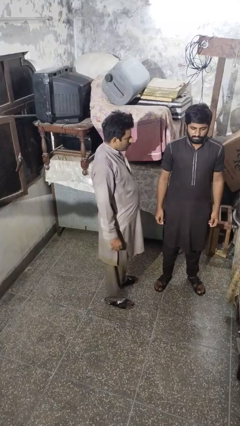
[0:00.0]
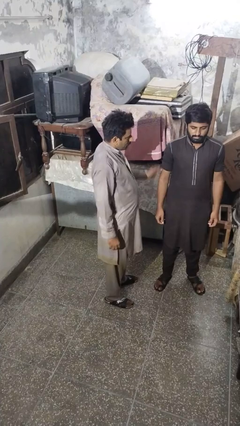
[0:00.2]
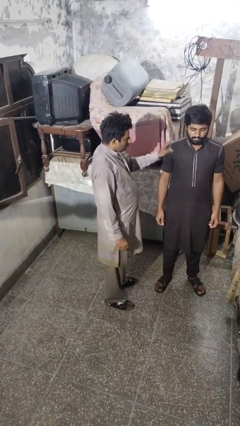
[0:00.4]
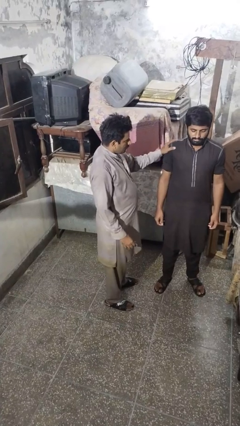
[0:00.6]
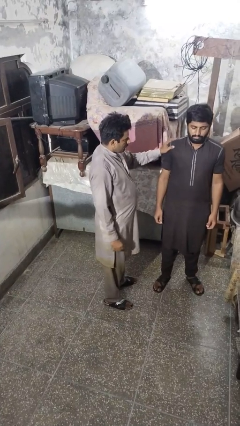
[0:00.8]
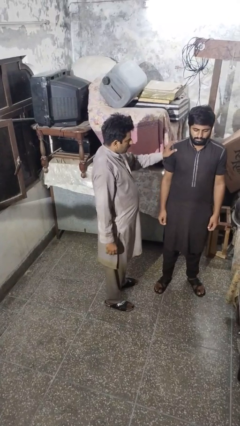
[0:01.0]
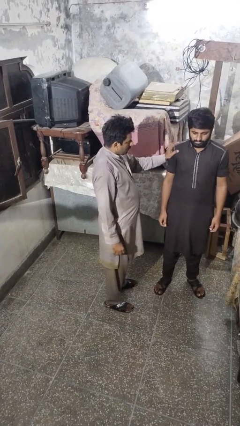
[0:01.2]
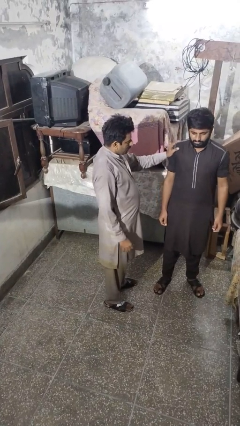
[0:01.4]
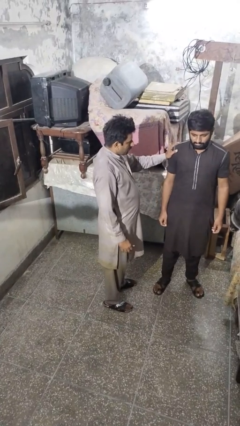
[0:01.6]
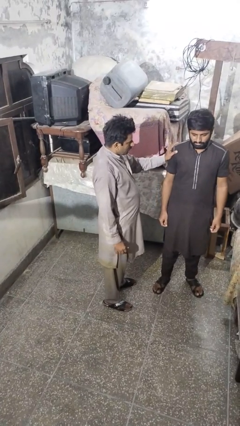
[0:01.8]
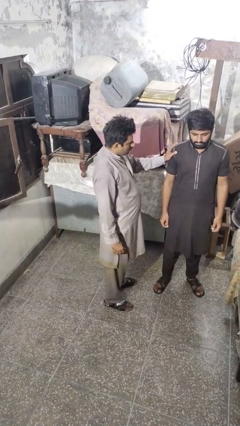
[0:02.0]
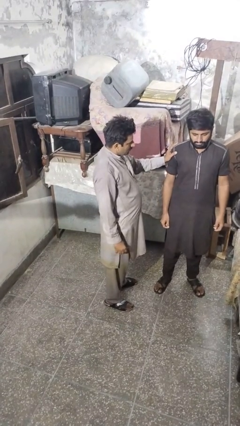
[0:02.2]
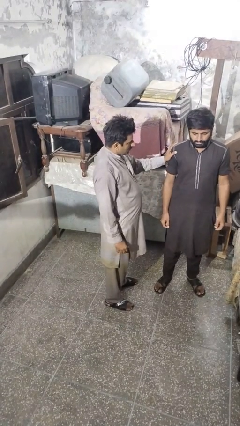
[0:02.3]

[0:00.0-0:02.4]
person grabs person by shoulder

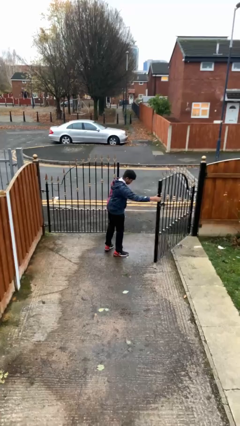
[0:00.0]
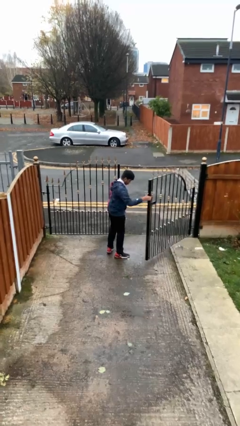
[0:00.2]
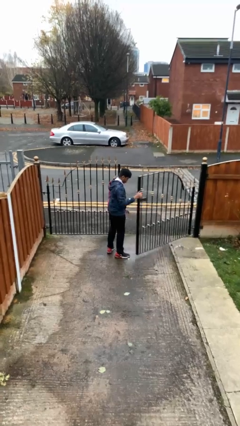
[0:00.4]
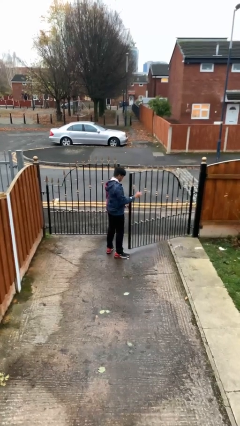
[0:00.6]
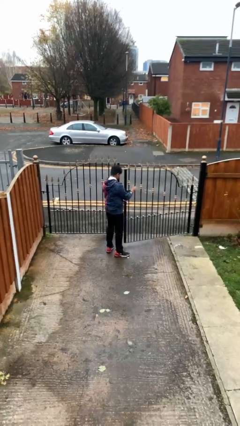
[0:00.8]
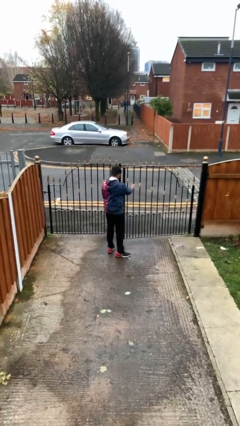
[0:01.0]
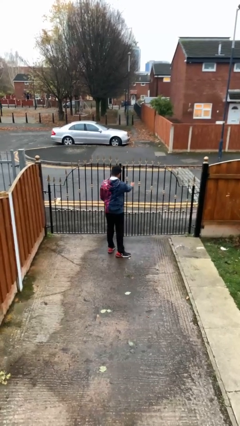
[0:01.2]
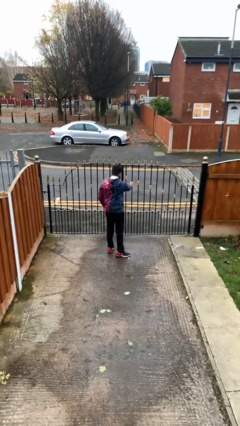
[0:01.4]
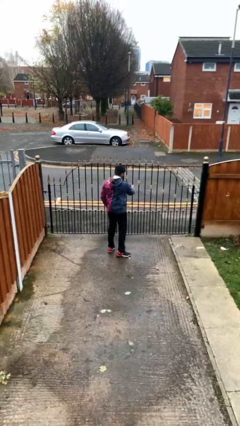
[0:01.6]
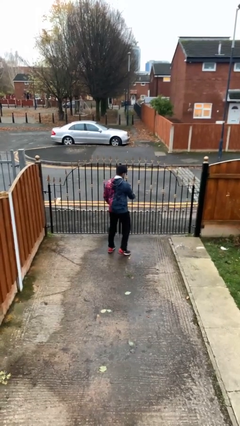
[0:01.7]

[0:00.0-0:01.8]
person closes facility door

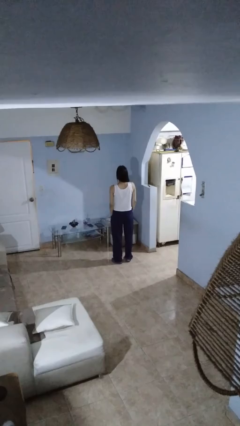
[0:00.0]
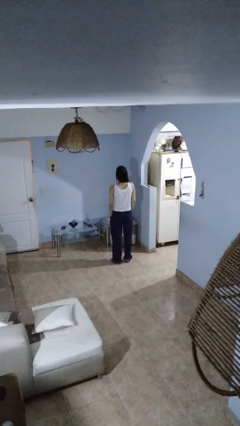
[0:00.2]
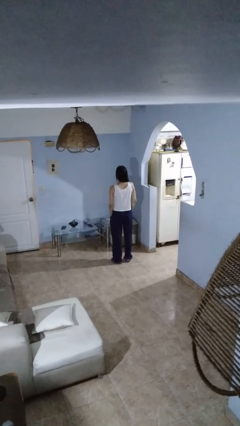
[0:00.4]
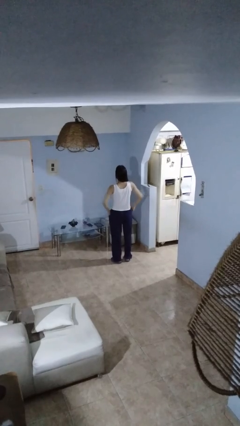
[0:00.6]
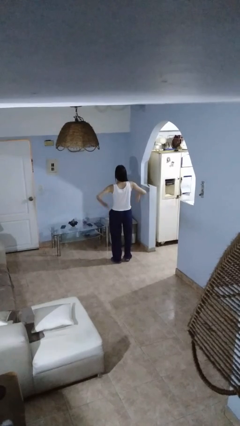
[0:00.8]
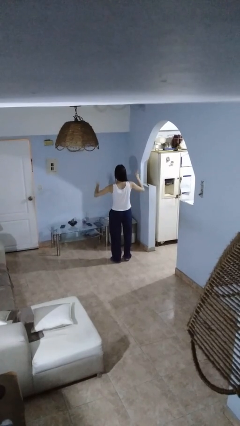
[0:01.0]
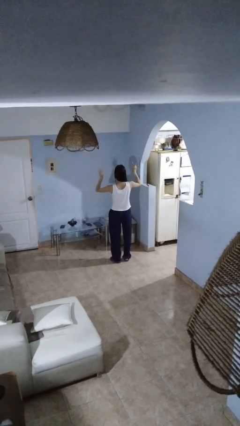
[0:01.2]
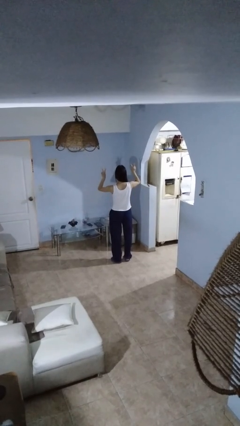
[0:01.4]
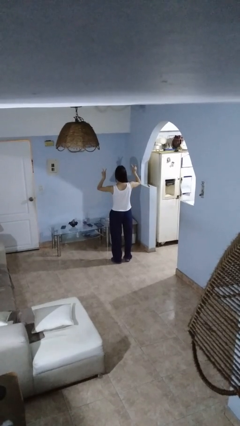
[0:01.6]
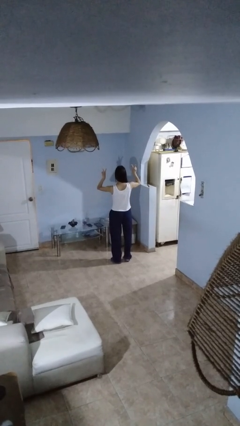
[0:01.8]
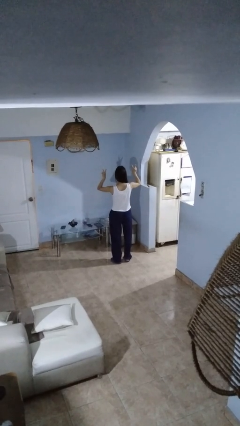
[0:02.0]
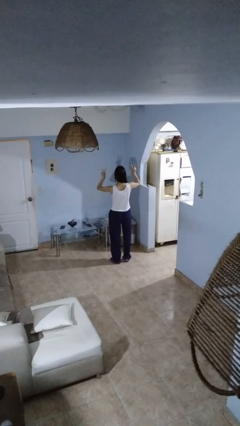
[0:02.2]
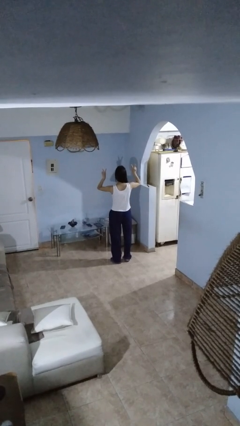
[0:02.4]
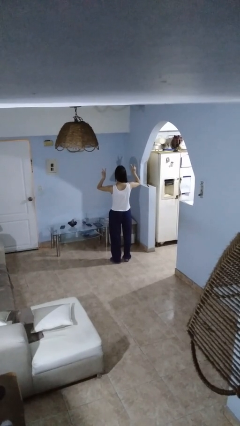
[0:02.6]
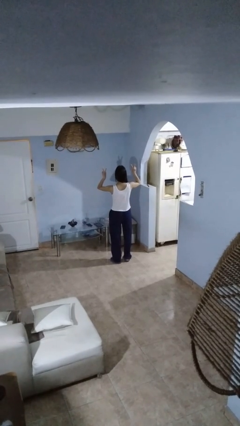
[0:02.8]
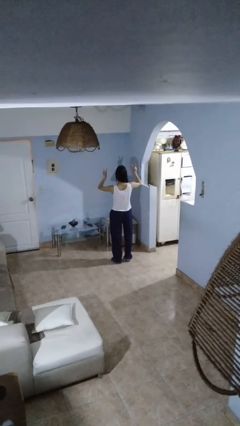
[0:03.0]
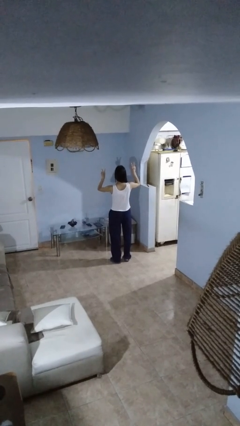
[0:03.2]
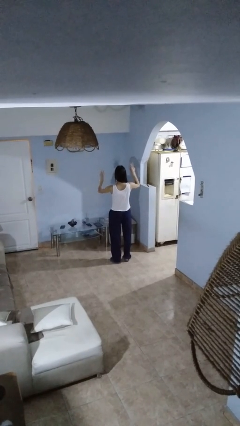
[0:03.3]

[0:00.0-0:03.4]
person gestures peace

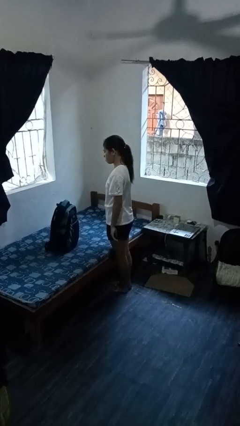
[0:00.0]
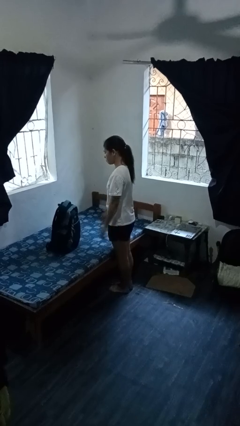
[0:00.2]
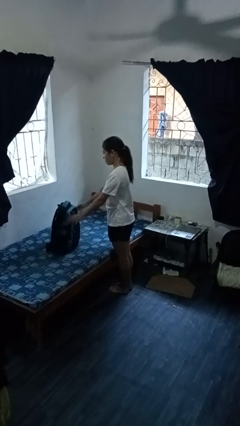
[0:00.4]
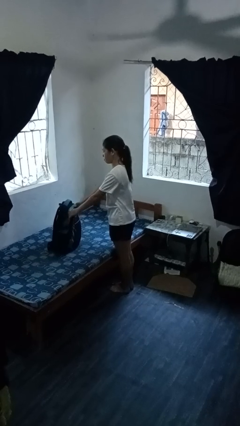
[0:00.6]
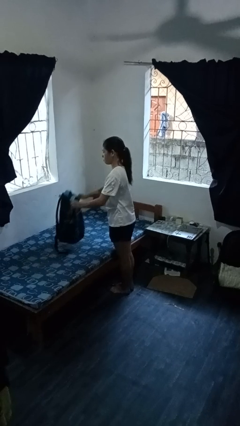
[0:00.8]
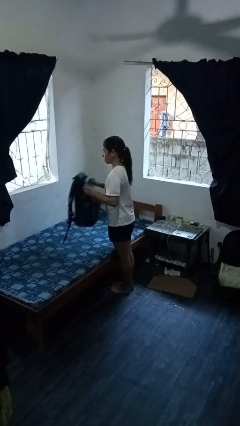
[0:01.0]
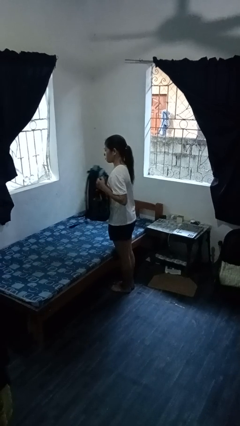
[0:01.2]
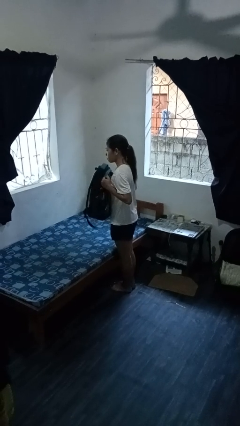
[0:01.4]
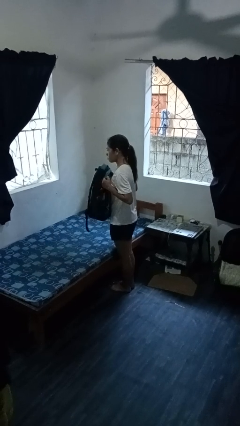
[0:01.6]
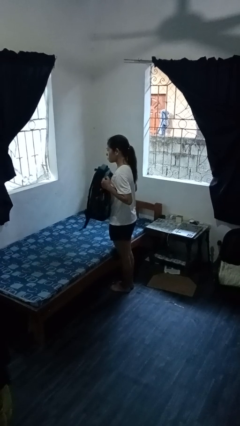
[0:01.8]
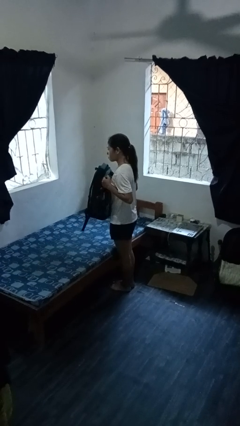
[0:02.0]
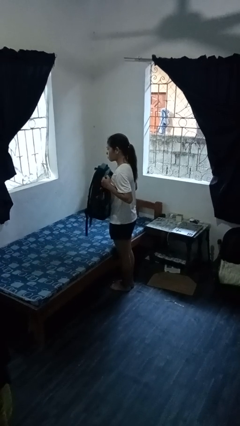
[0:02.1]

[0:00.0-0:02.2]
person picks up object from bed

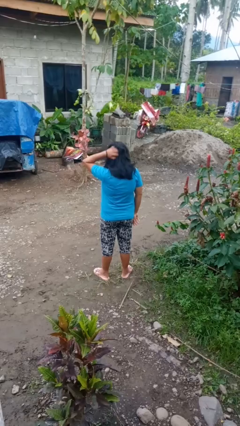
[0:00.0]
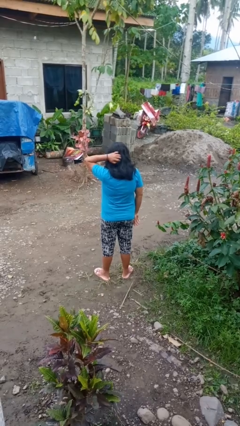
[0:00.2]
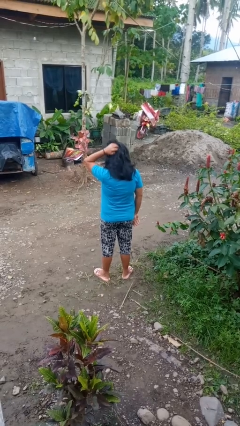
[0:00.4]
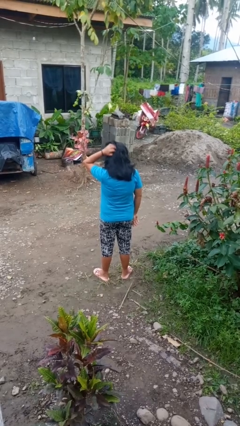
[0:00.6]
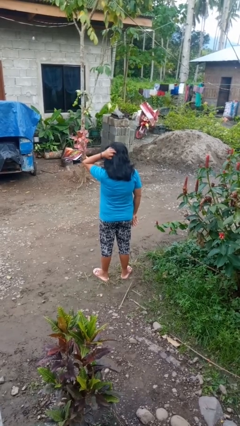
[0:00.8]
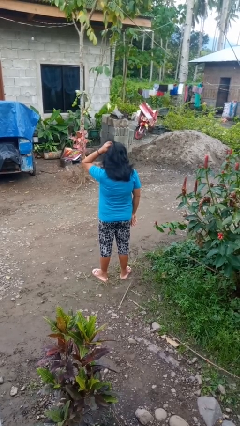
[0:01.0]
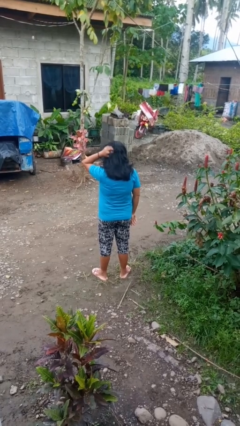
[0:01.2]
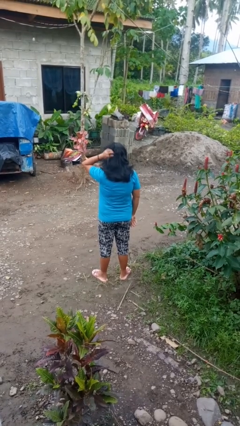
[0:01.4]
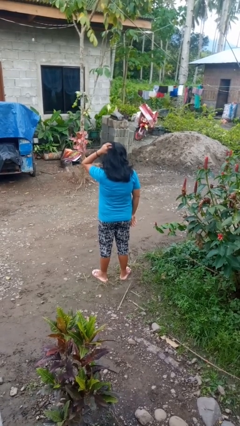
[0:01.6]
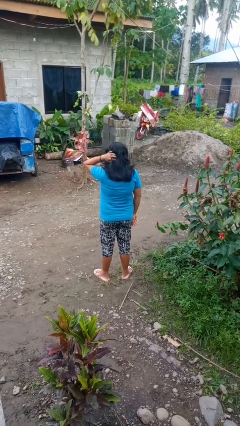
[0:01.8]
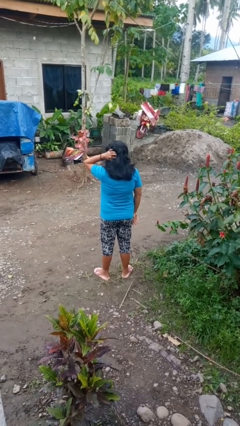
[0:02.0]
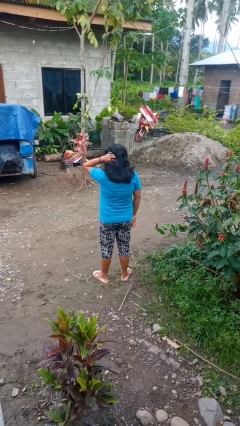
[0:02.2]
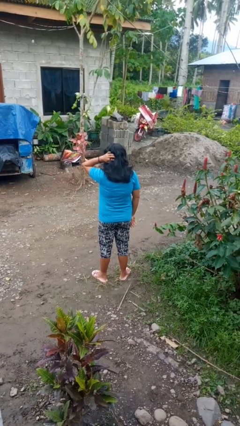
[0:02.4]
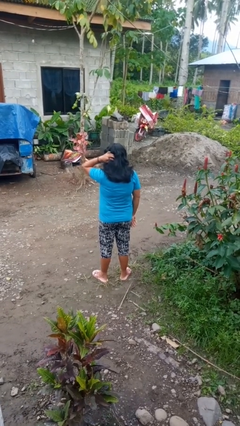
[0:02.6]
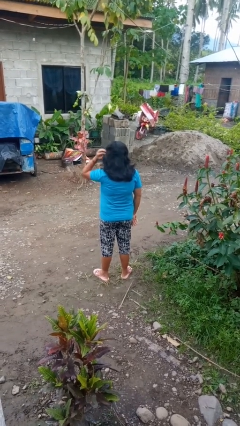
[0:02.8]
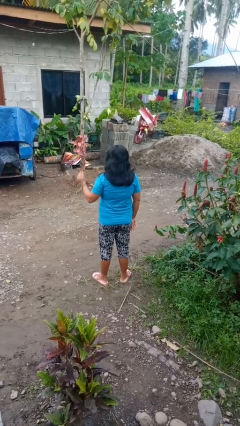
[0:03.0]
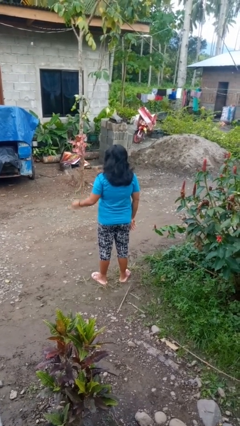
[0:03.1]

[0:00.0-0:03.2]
person scratches face

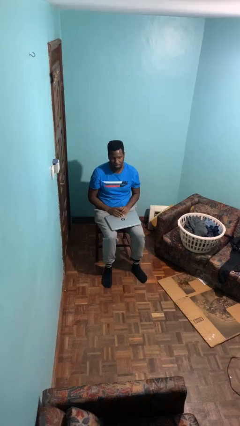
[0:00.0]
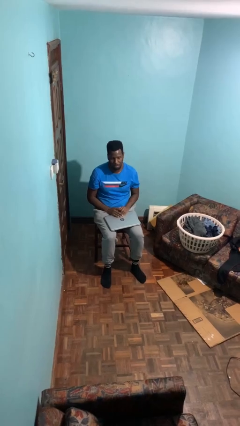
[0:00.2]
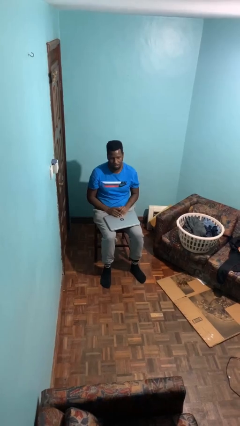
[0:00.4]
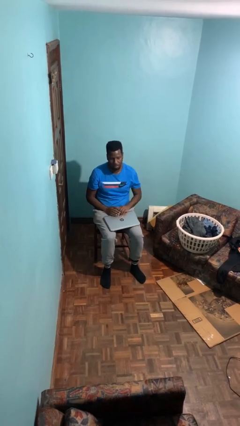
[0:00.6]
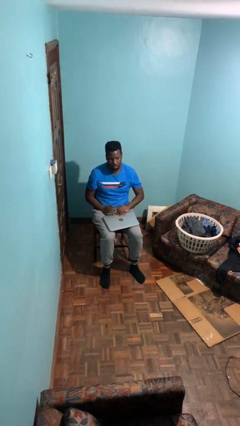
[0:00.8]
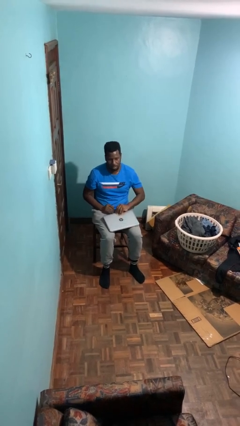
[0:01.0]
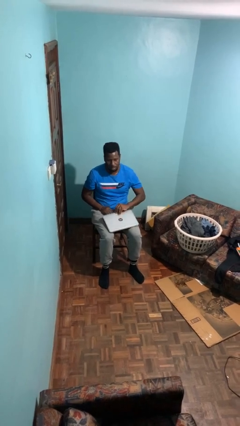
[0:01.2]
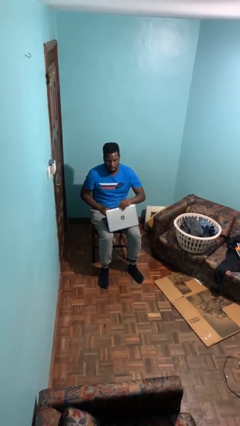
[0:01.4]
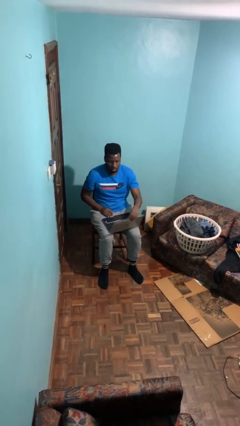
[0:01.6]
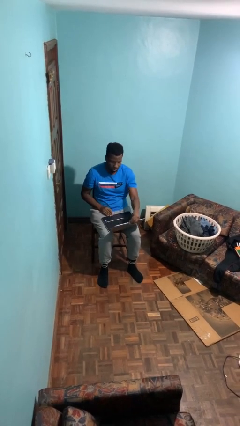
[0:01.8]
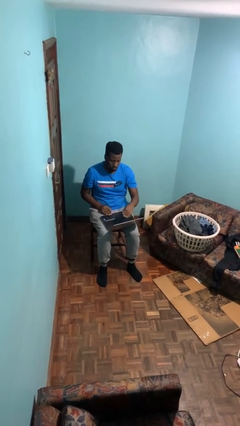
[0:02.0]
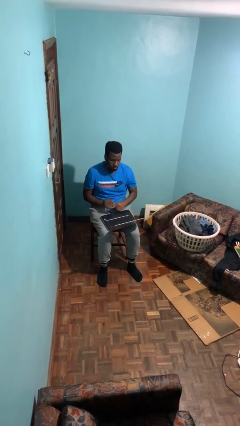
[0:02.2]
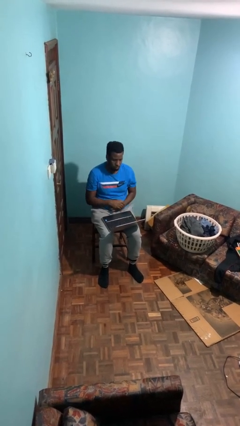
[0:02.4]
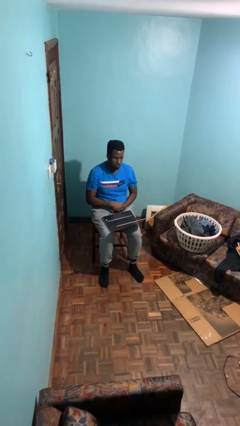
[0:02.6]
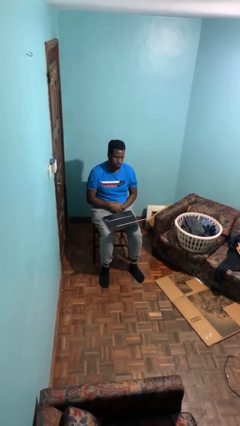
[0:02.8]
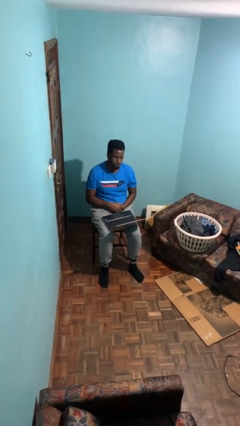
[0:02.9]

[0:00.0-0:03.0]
person opens laptop

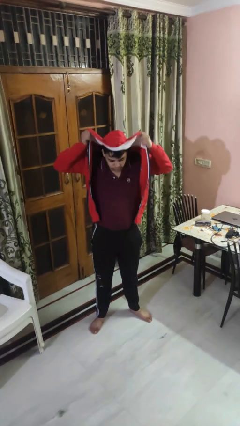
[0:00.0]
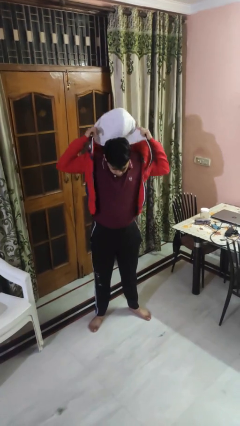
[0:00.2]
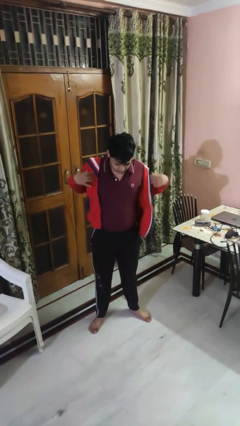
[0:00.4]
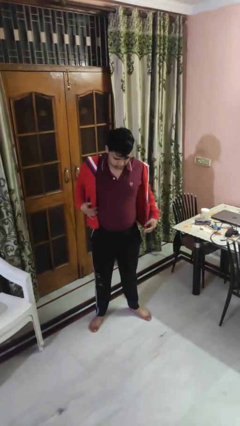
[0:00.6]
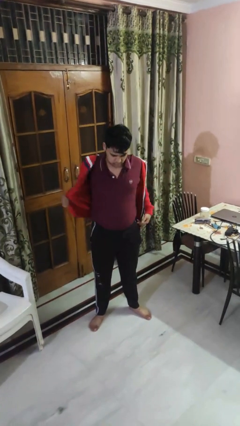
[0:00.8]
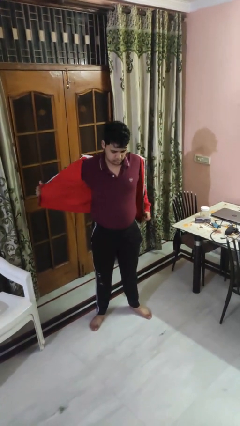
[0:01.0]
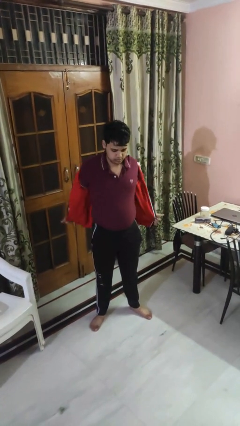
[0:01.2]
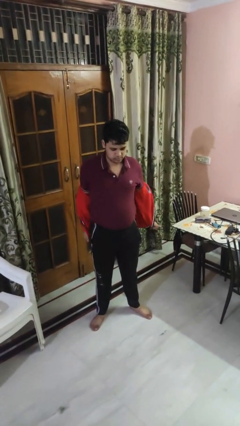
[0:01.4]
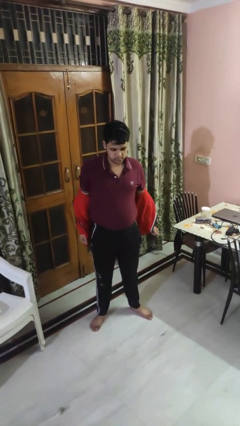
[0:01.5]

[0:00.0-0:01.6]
person takes off hoodie
